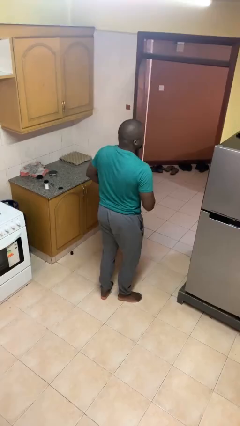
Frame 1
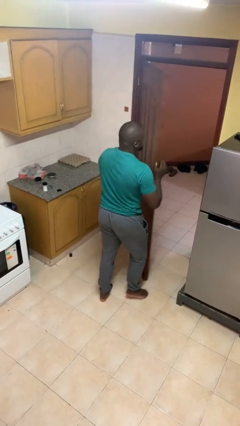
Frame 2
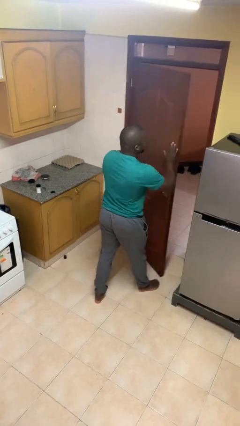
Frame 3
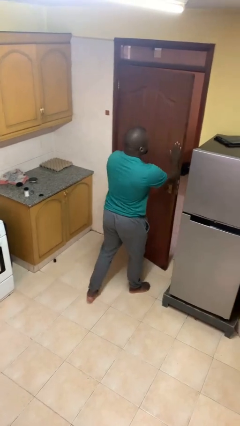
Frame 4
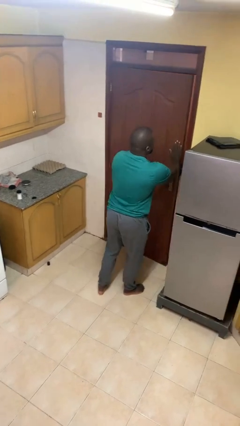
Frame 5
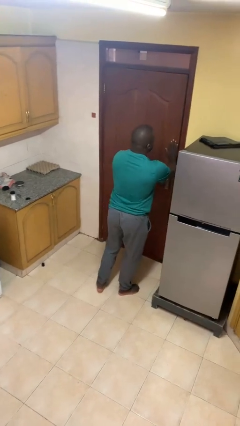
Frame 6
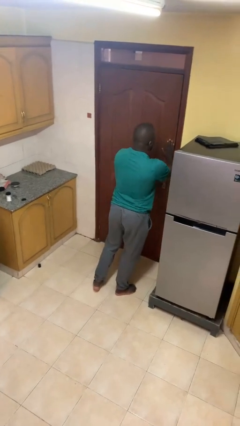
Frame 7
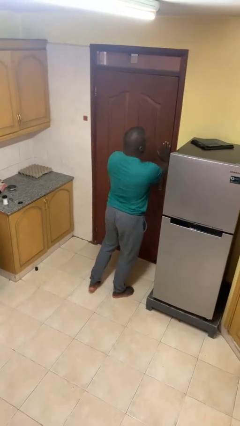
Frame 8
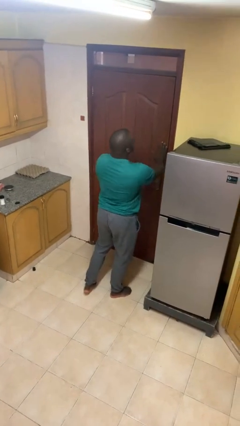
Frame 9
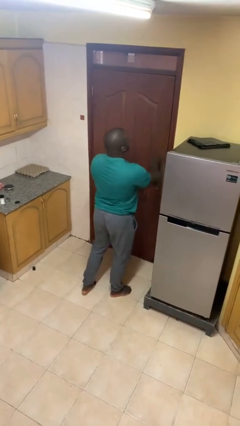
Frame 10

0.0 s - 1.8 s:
person closes facility door

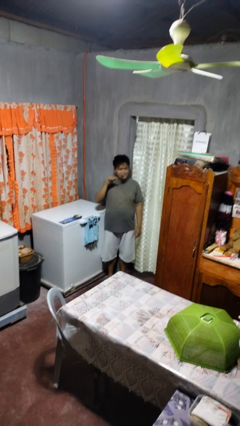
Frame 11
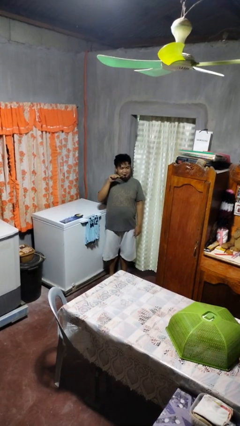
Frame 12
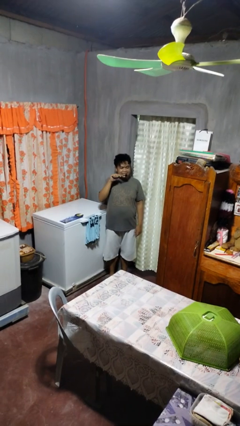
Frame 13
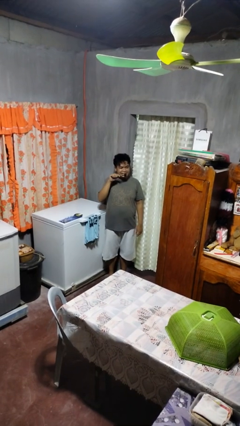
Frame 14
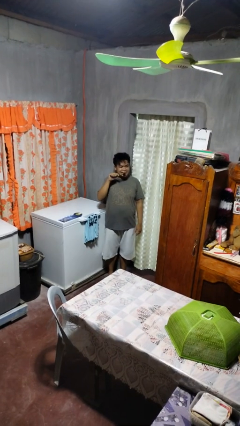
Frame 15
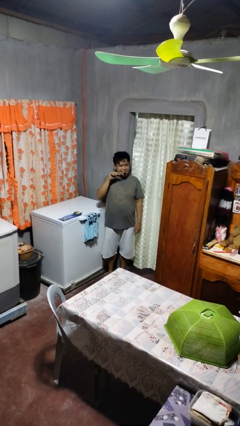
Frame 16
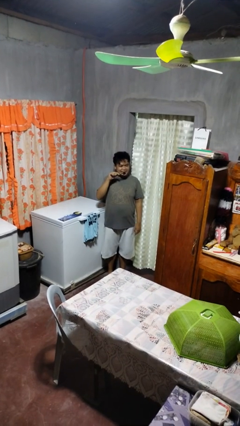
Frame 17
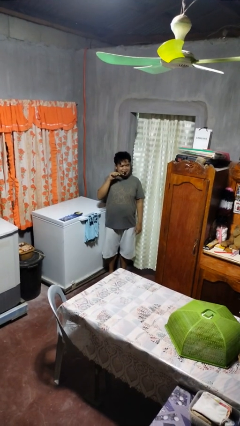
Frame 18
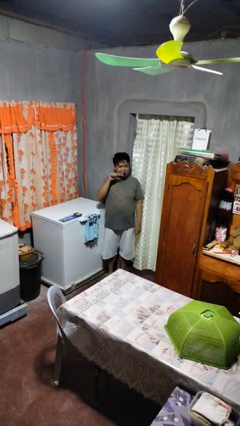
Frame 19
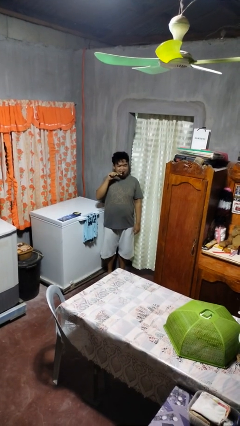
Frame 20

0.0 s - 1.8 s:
person brushes teeth

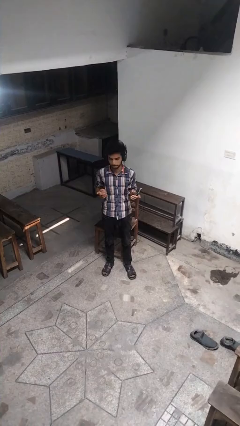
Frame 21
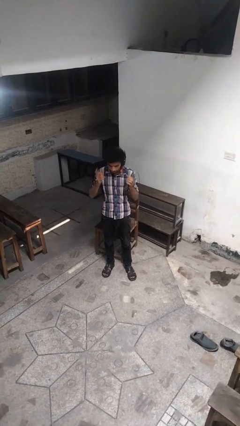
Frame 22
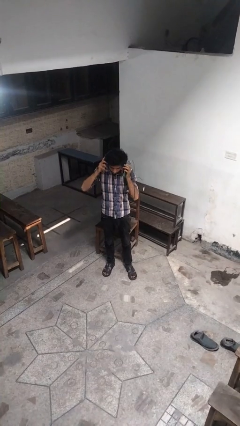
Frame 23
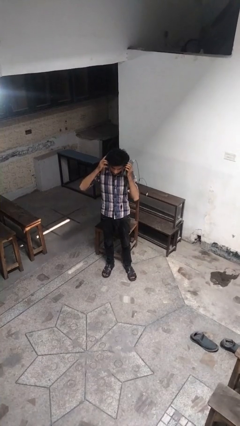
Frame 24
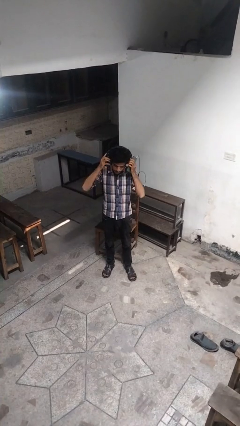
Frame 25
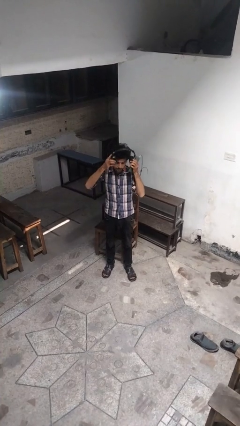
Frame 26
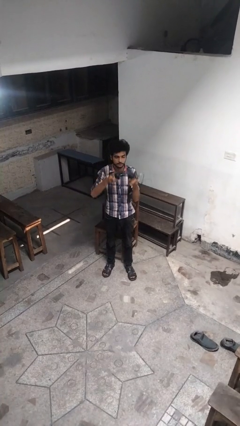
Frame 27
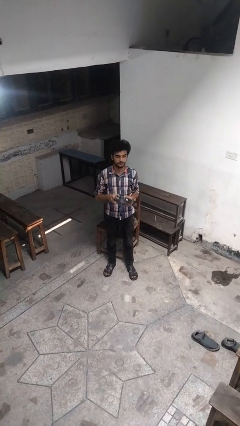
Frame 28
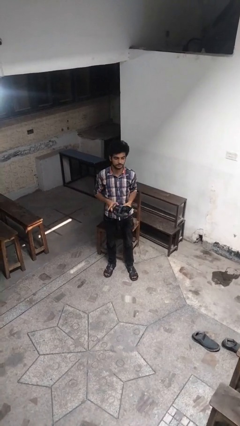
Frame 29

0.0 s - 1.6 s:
person takes off headphones

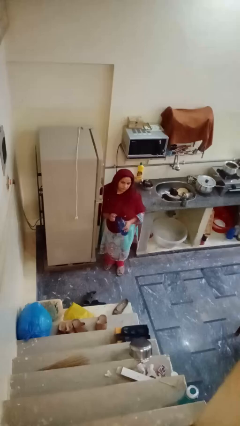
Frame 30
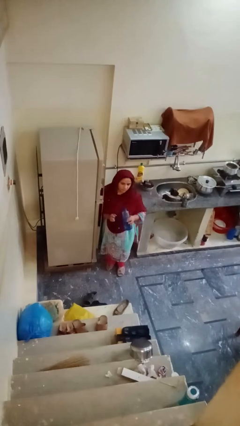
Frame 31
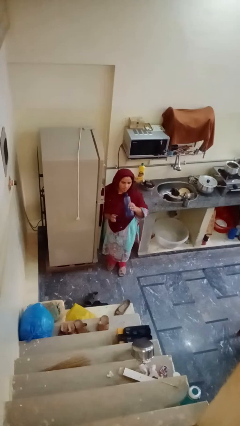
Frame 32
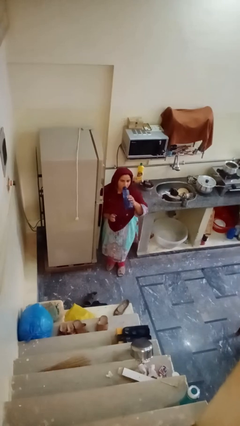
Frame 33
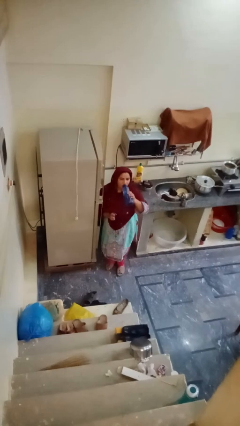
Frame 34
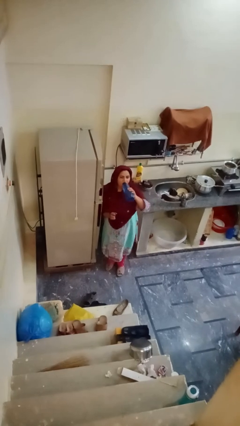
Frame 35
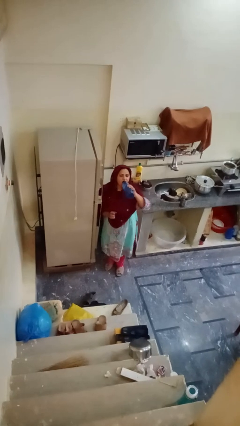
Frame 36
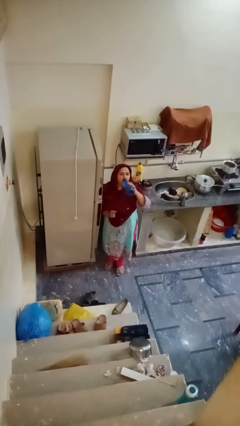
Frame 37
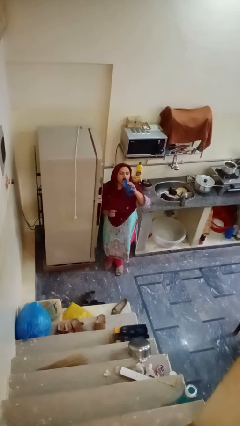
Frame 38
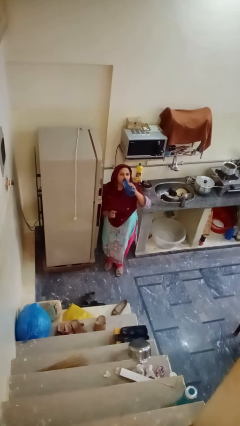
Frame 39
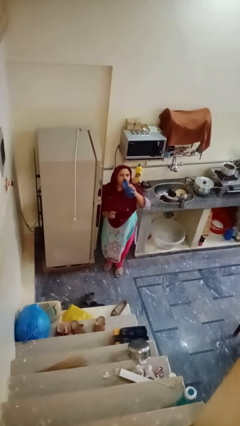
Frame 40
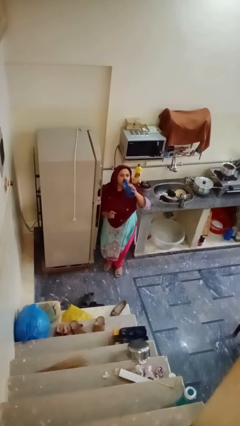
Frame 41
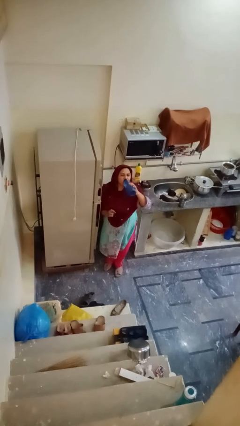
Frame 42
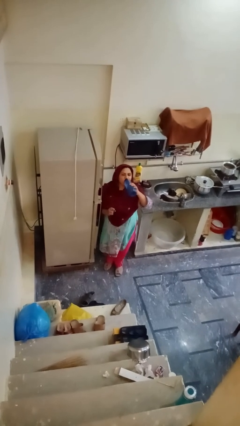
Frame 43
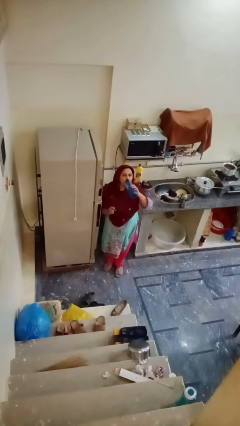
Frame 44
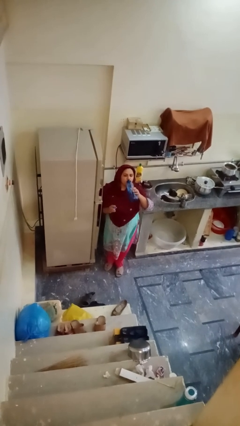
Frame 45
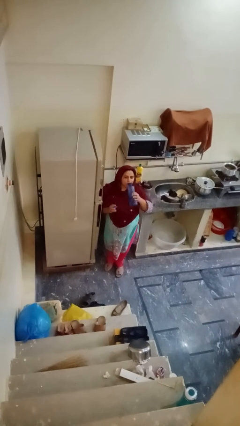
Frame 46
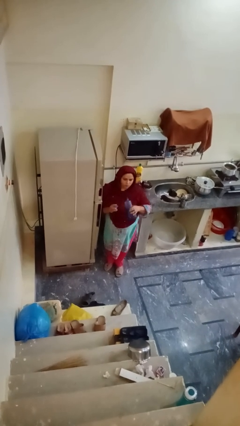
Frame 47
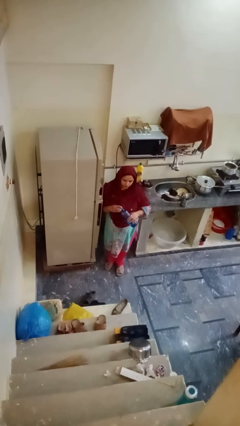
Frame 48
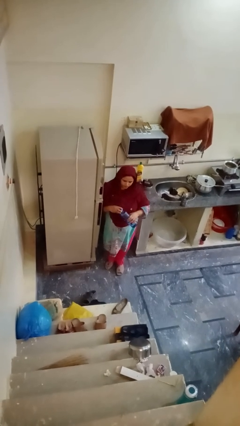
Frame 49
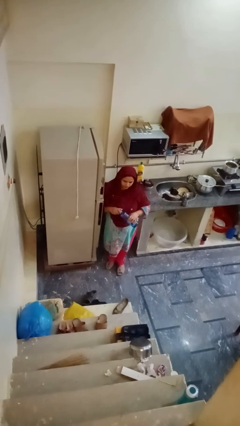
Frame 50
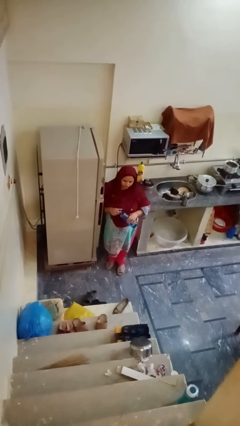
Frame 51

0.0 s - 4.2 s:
person drinks from bottle

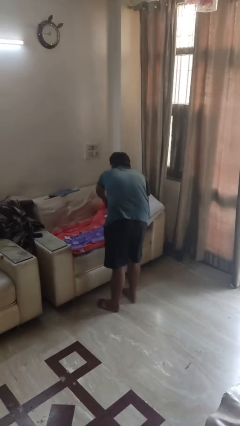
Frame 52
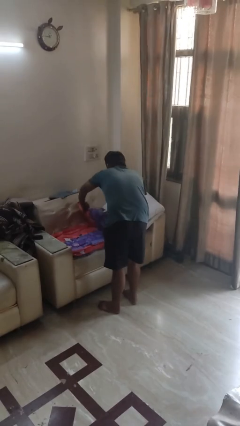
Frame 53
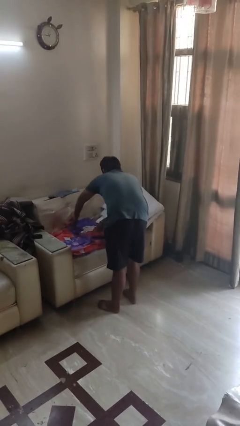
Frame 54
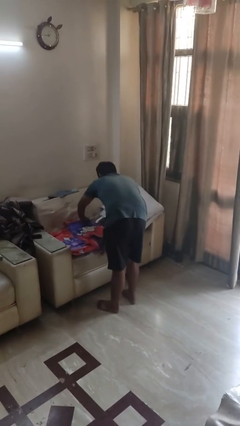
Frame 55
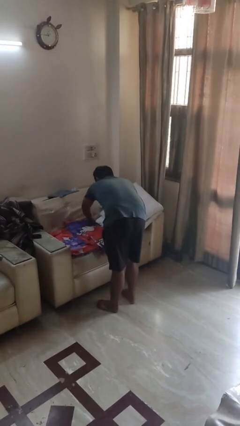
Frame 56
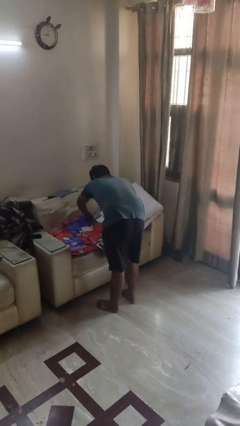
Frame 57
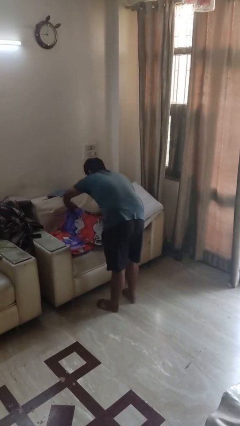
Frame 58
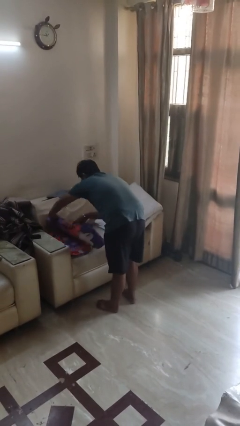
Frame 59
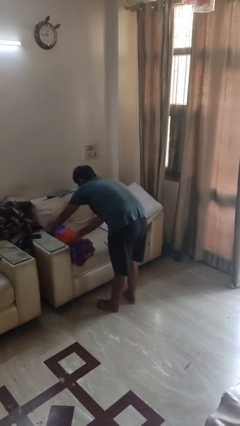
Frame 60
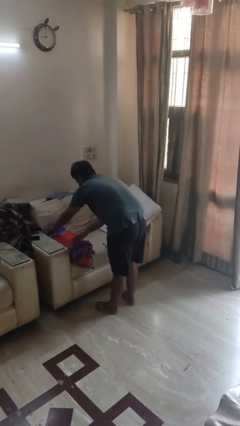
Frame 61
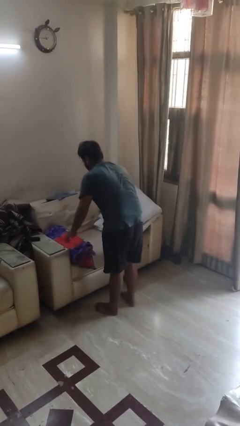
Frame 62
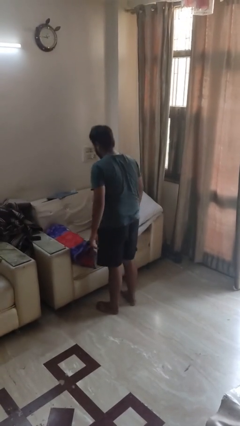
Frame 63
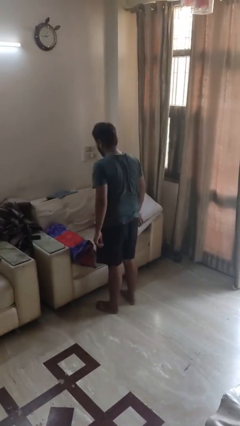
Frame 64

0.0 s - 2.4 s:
person folds blanket

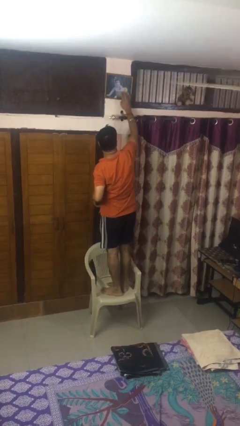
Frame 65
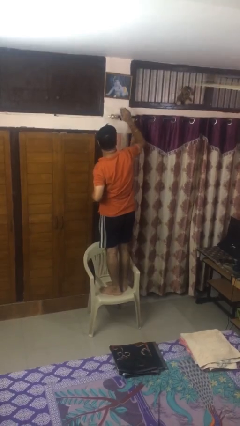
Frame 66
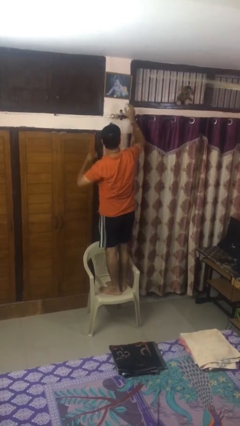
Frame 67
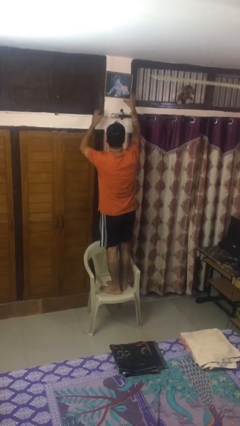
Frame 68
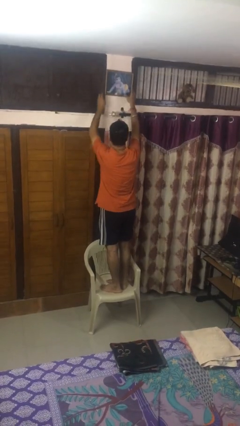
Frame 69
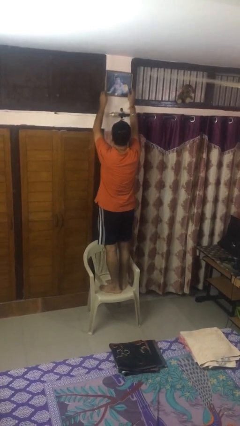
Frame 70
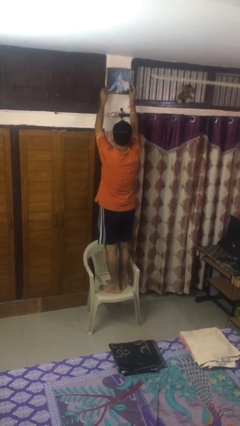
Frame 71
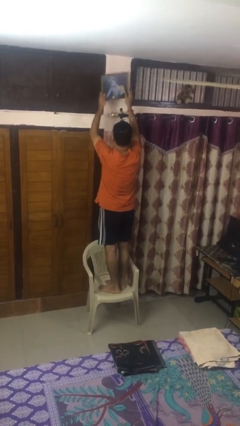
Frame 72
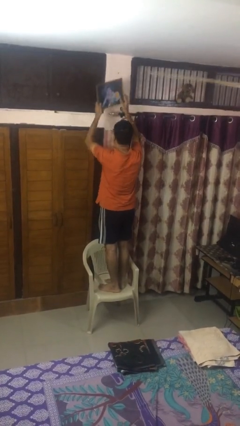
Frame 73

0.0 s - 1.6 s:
person takes down picture frame

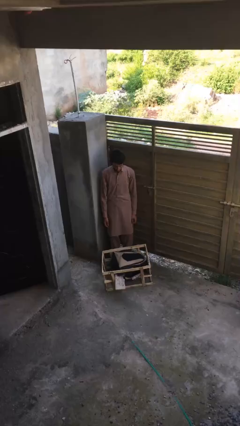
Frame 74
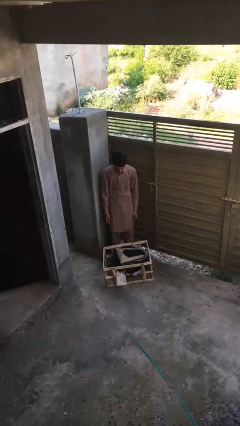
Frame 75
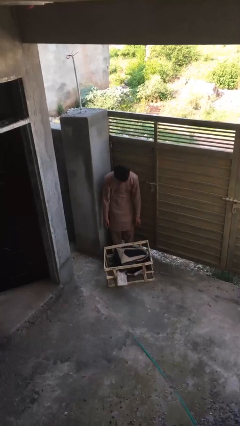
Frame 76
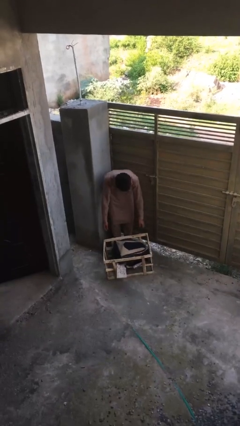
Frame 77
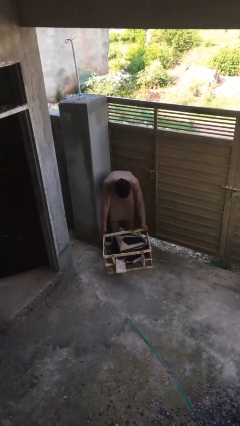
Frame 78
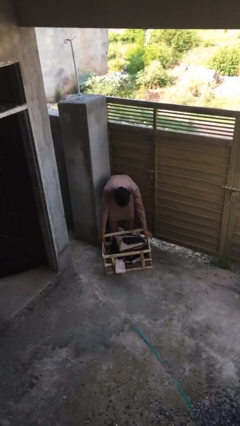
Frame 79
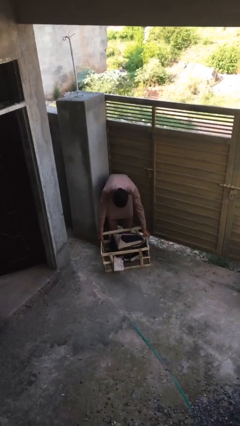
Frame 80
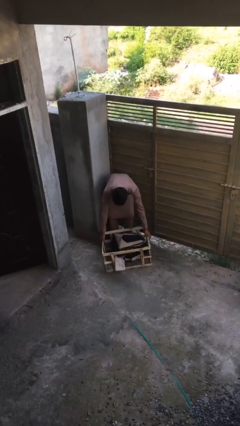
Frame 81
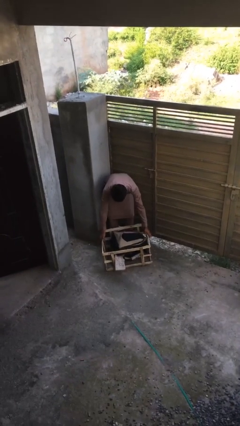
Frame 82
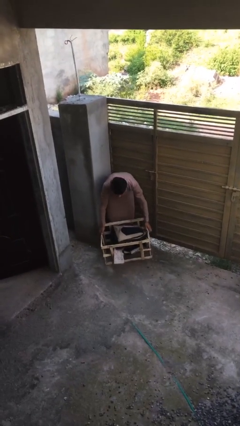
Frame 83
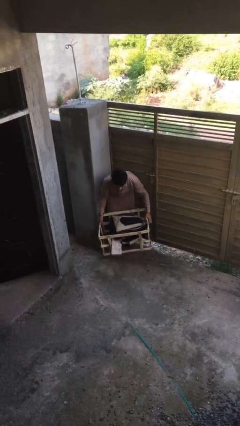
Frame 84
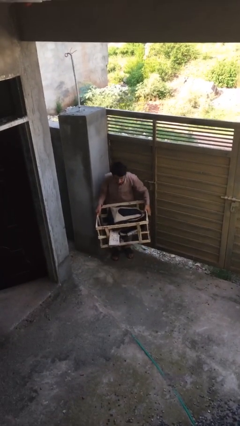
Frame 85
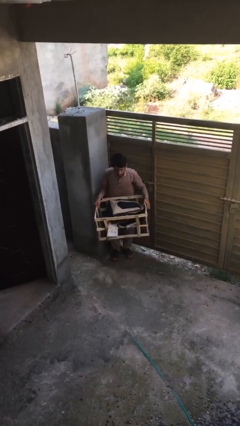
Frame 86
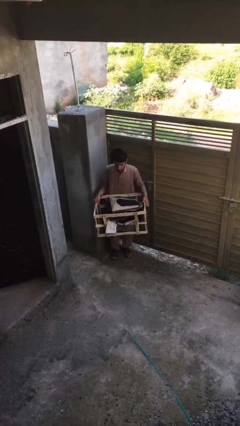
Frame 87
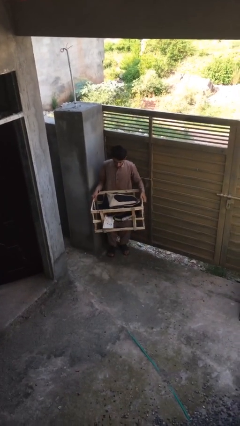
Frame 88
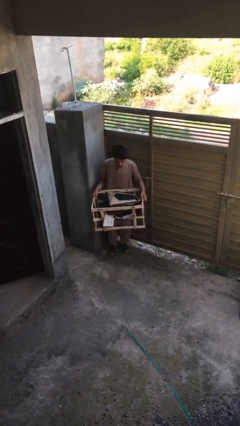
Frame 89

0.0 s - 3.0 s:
person picks up object from floor

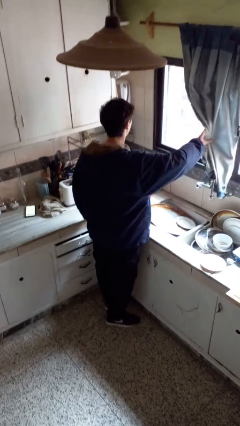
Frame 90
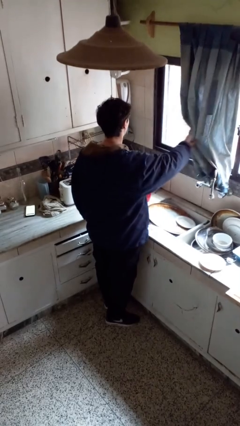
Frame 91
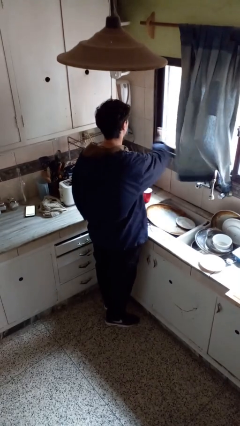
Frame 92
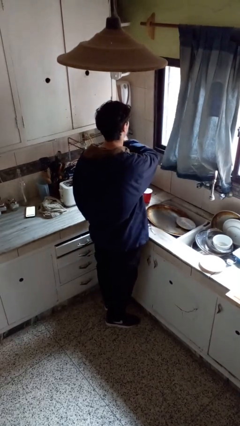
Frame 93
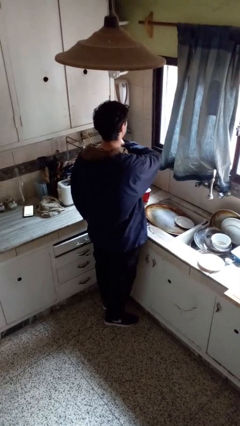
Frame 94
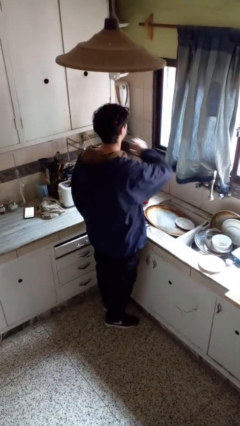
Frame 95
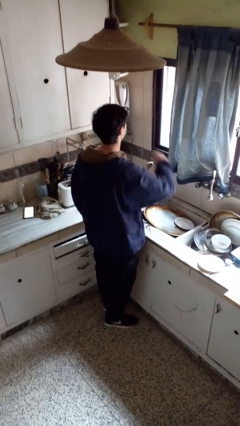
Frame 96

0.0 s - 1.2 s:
person closes curtains
